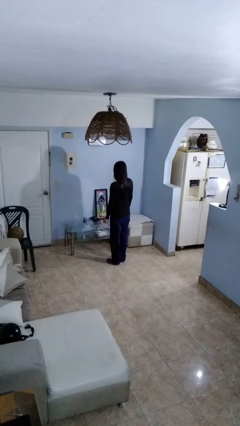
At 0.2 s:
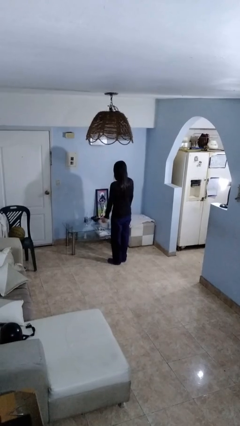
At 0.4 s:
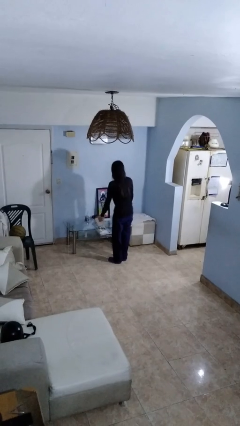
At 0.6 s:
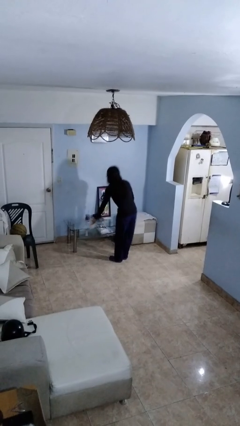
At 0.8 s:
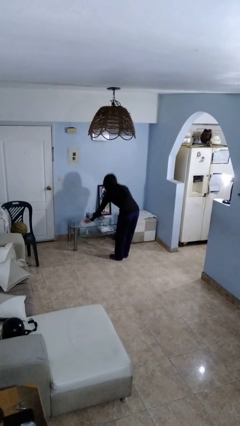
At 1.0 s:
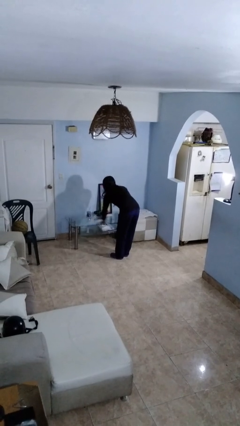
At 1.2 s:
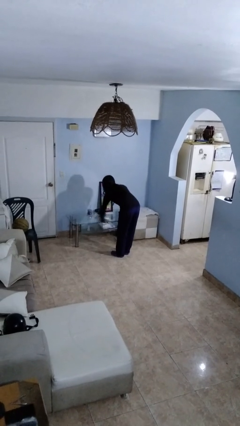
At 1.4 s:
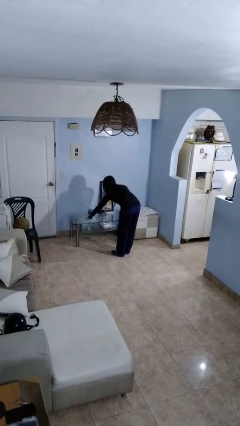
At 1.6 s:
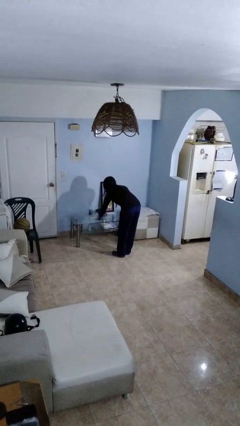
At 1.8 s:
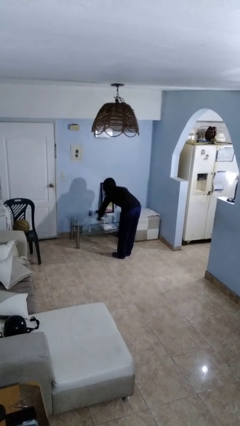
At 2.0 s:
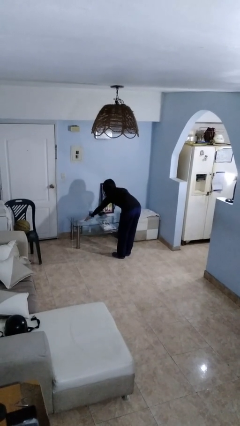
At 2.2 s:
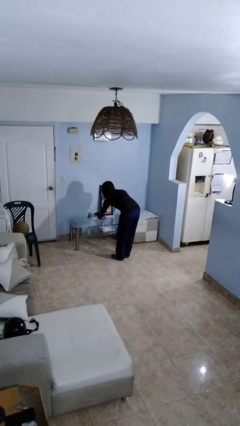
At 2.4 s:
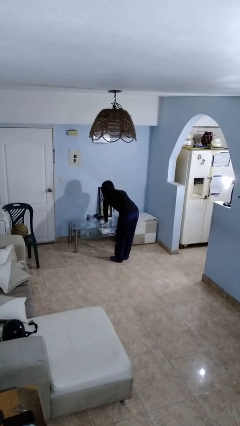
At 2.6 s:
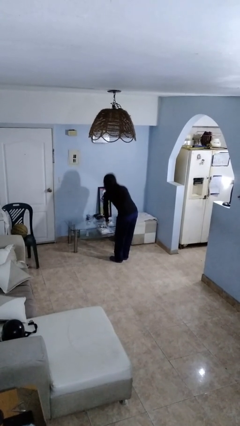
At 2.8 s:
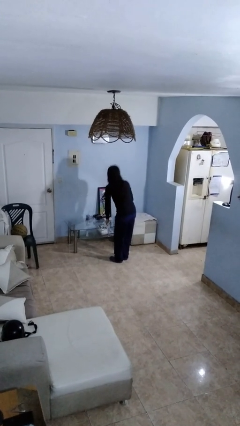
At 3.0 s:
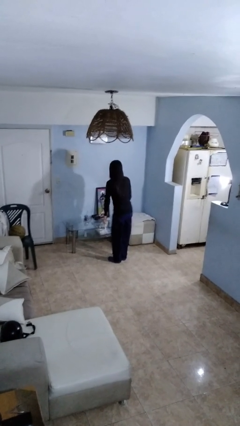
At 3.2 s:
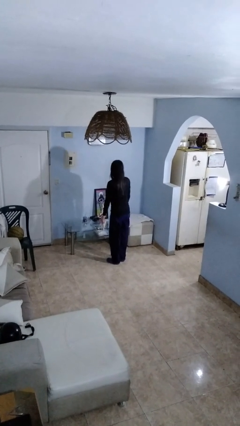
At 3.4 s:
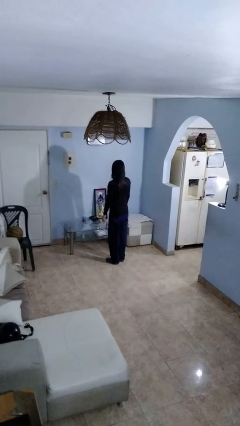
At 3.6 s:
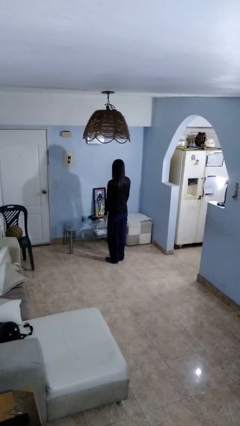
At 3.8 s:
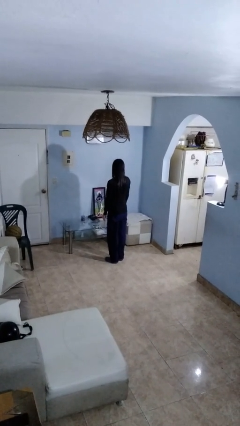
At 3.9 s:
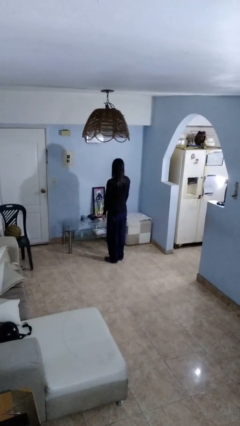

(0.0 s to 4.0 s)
person cleans table with rag

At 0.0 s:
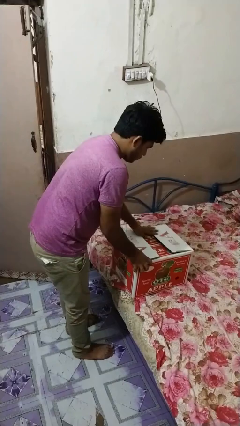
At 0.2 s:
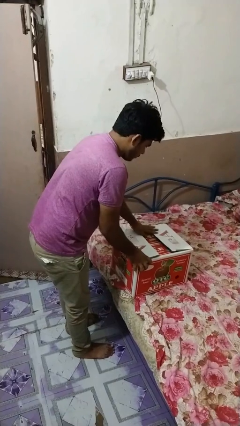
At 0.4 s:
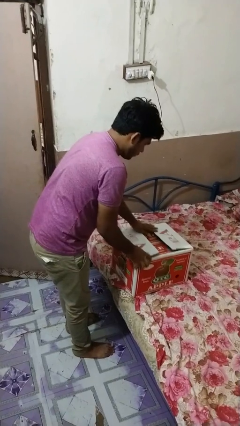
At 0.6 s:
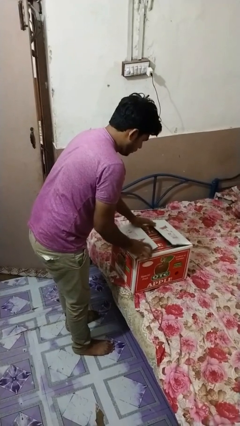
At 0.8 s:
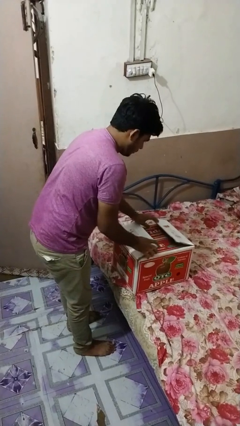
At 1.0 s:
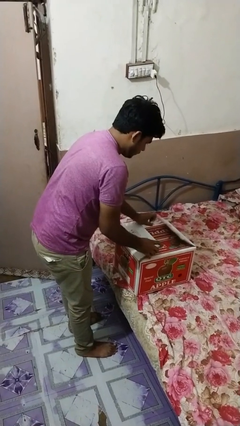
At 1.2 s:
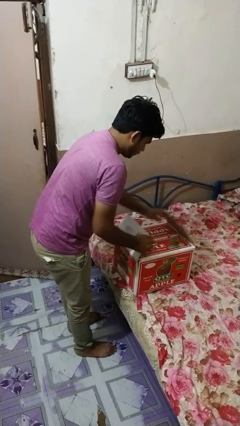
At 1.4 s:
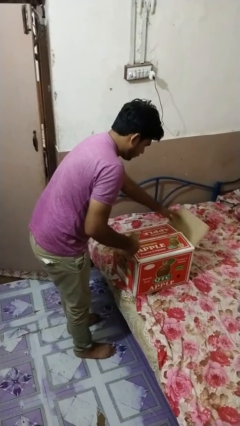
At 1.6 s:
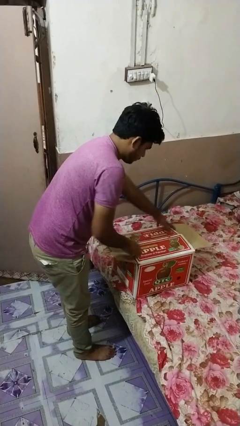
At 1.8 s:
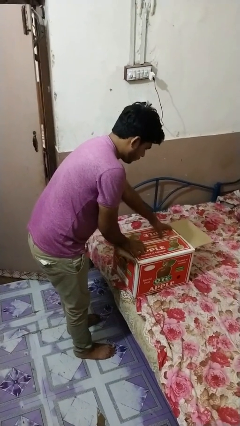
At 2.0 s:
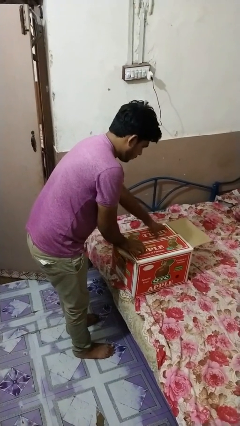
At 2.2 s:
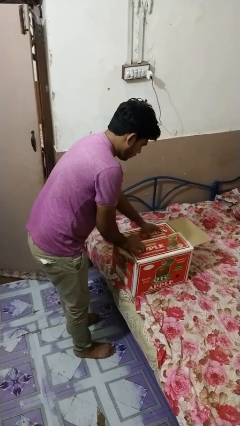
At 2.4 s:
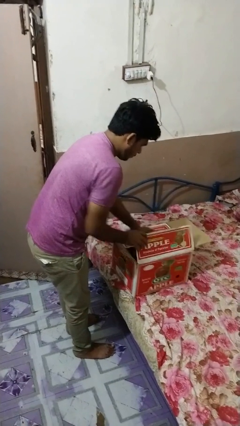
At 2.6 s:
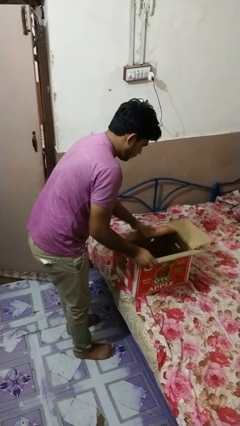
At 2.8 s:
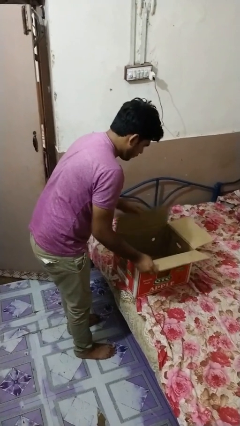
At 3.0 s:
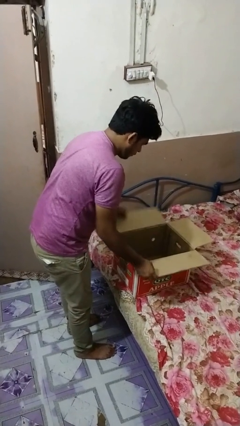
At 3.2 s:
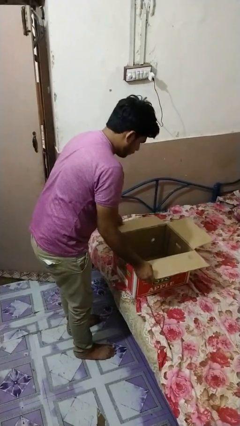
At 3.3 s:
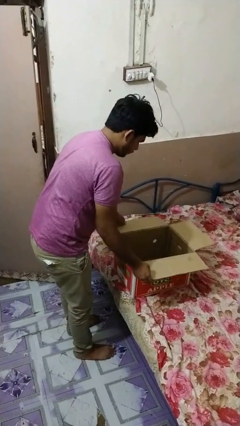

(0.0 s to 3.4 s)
person closes box

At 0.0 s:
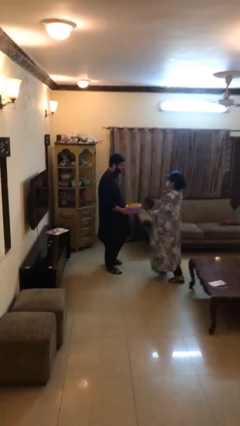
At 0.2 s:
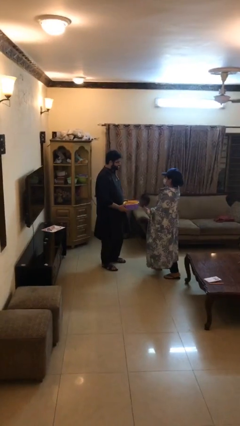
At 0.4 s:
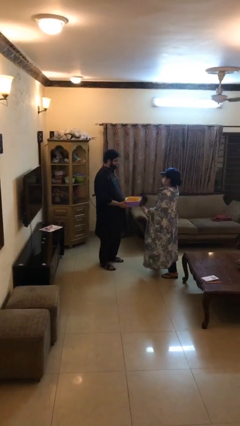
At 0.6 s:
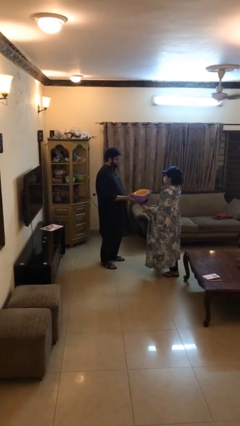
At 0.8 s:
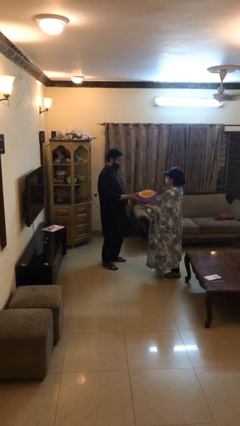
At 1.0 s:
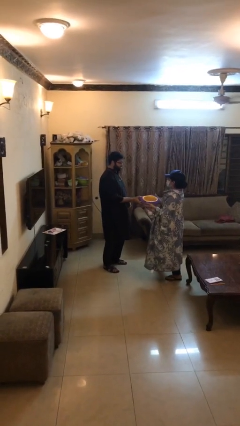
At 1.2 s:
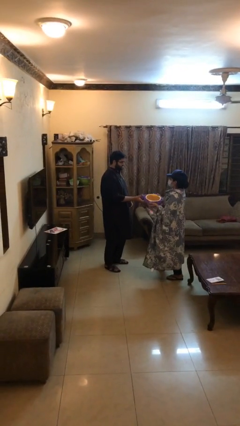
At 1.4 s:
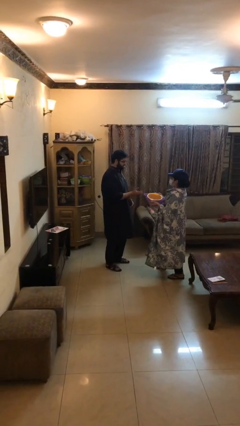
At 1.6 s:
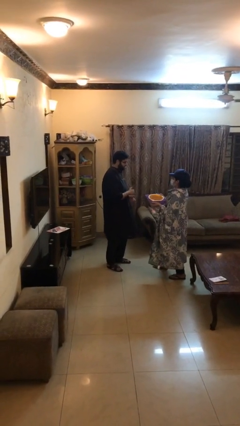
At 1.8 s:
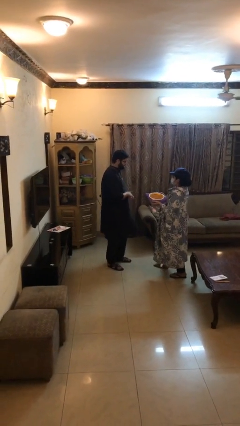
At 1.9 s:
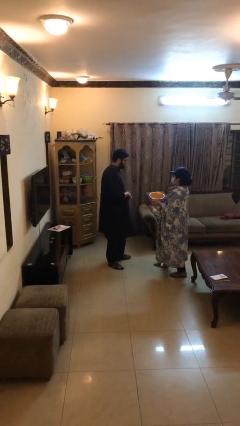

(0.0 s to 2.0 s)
person transfers object to person

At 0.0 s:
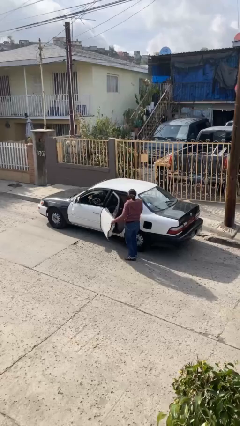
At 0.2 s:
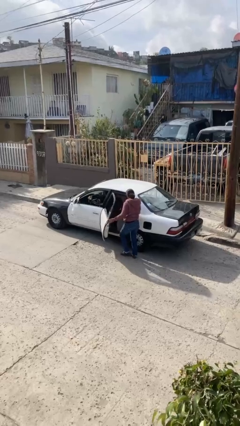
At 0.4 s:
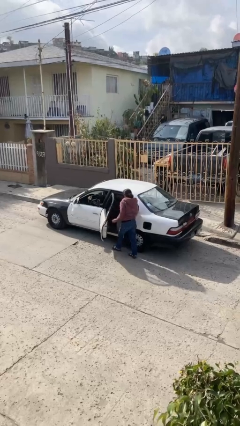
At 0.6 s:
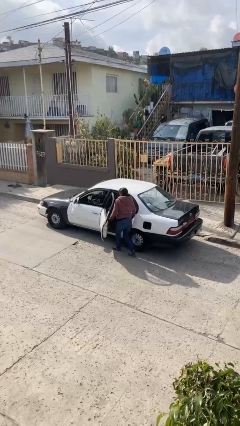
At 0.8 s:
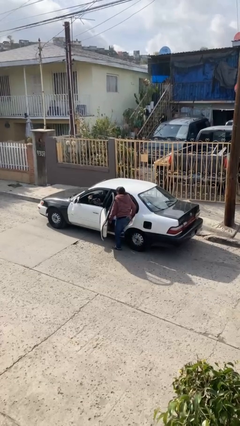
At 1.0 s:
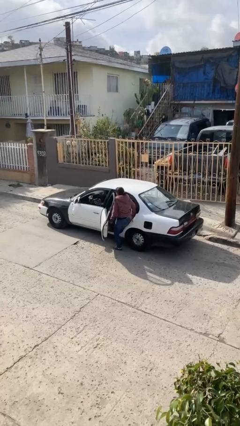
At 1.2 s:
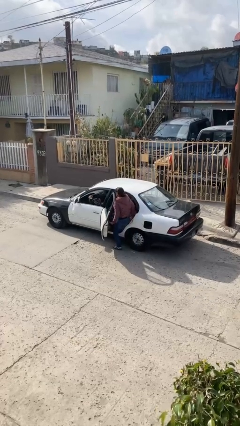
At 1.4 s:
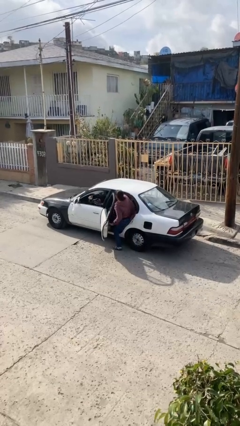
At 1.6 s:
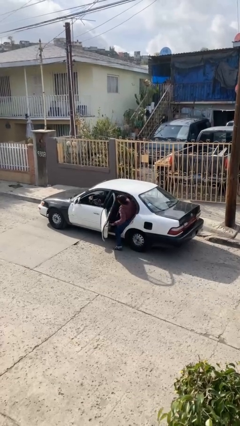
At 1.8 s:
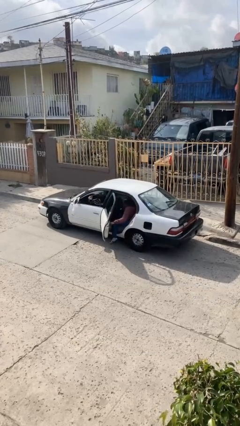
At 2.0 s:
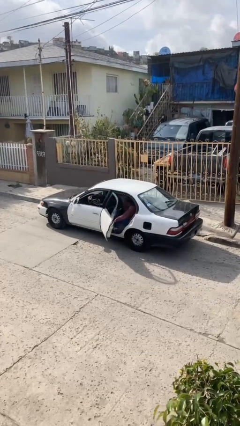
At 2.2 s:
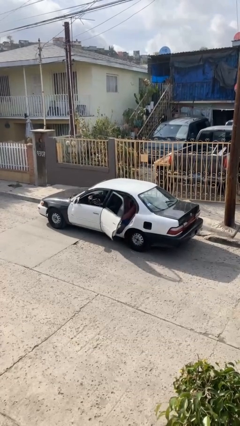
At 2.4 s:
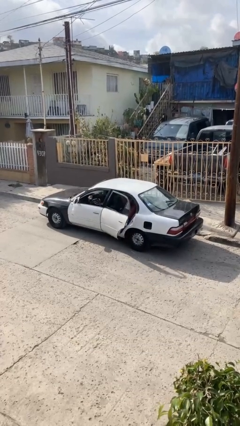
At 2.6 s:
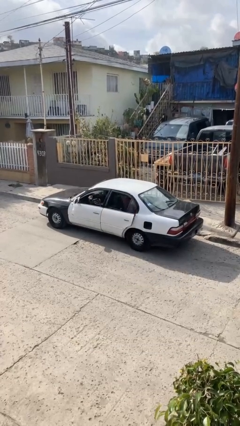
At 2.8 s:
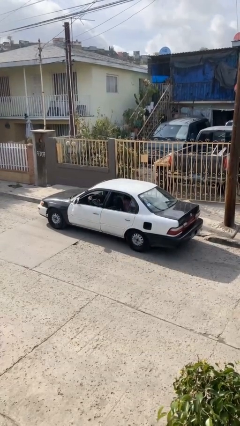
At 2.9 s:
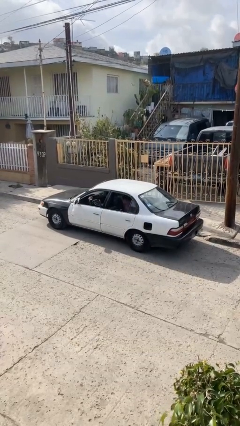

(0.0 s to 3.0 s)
car picks up person

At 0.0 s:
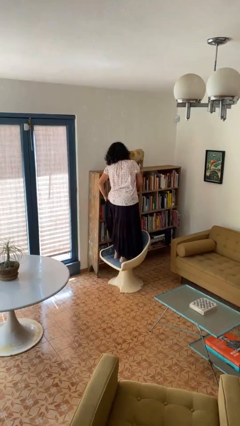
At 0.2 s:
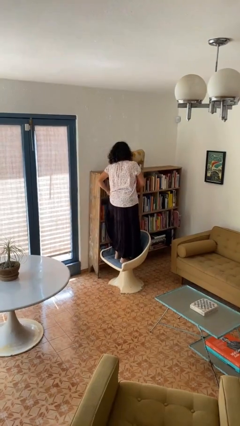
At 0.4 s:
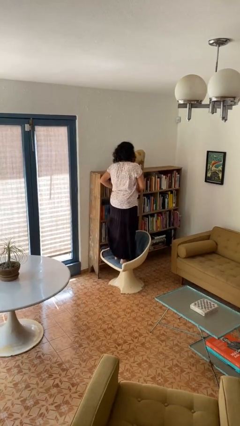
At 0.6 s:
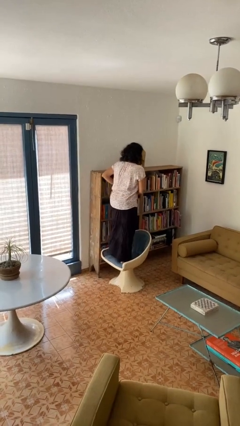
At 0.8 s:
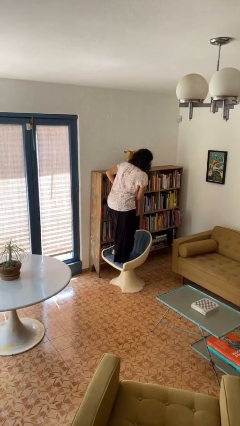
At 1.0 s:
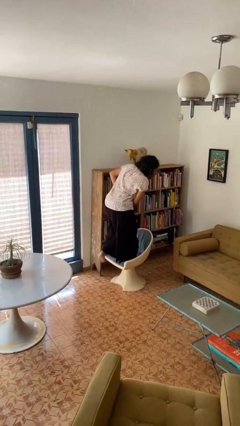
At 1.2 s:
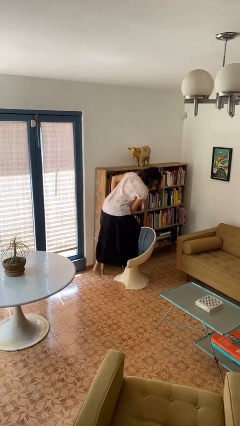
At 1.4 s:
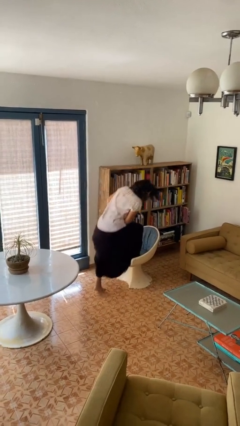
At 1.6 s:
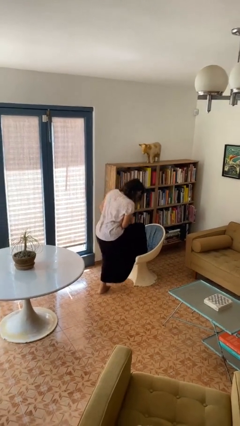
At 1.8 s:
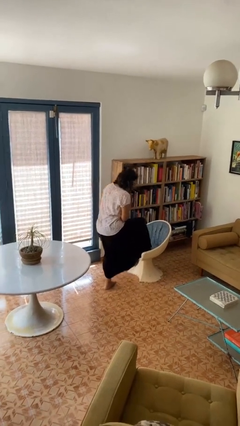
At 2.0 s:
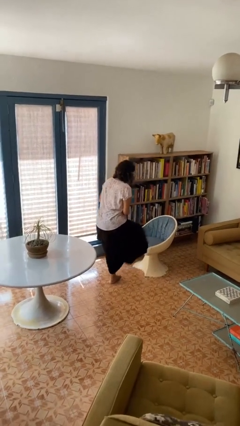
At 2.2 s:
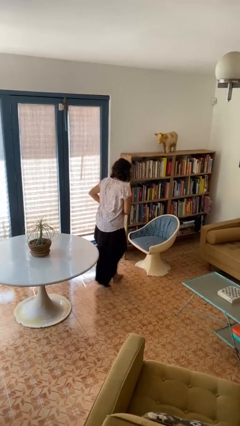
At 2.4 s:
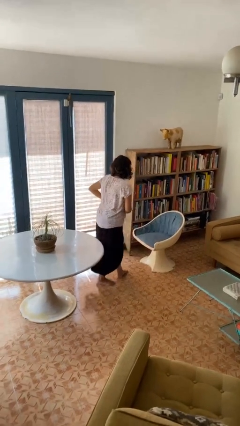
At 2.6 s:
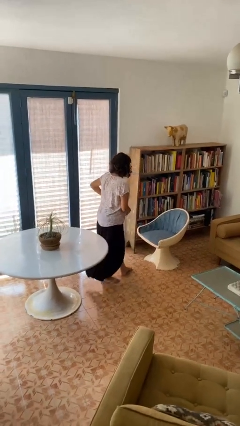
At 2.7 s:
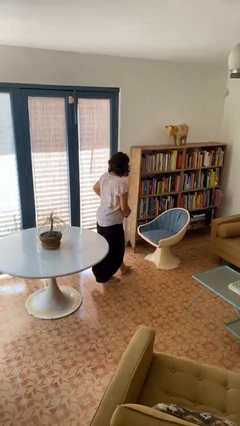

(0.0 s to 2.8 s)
person climbs off chair

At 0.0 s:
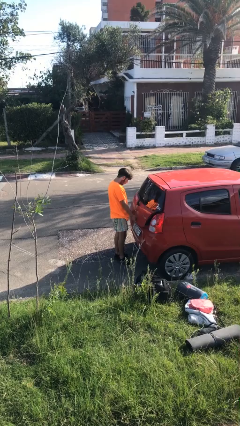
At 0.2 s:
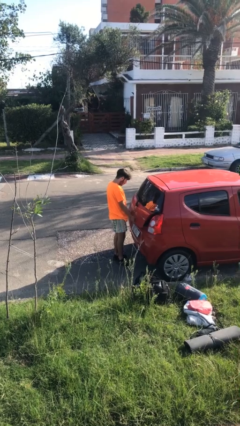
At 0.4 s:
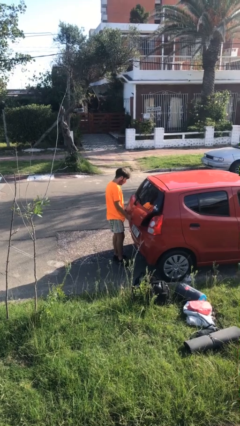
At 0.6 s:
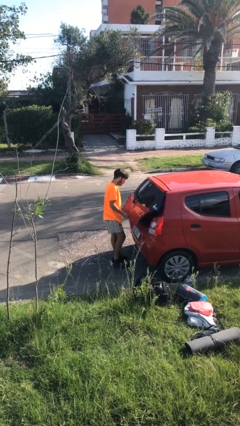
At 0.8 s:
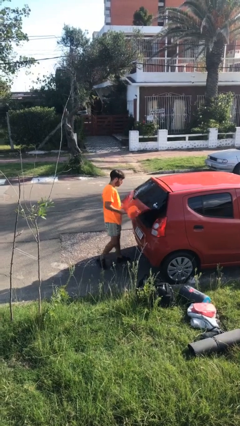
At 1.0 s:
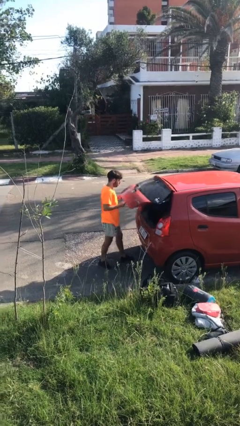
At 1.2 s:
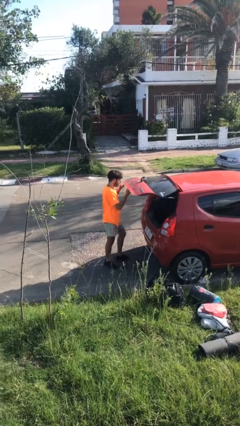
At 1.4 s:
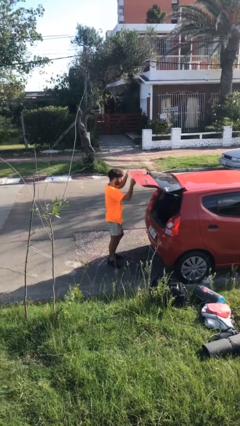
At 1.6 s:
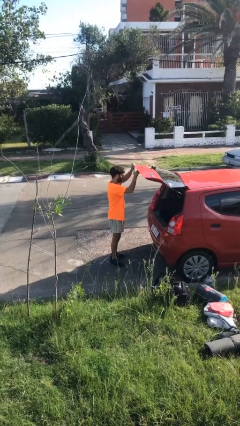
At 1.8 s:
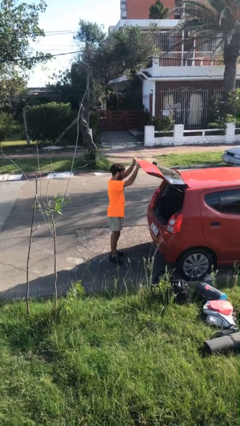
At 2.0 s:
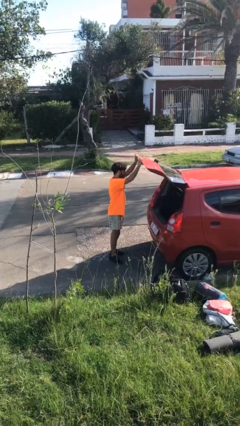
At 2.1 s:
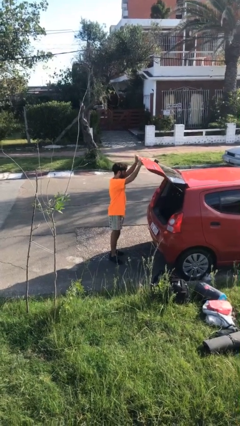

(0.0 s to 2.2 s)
person opens car trunk

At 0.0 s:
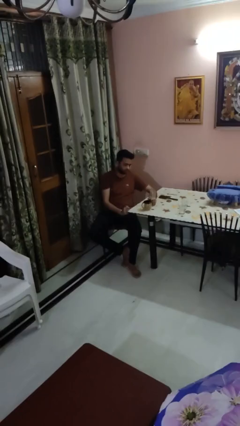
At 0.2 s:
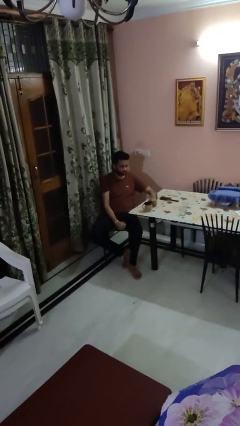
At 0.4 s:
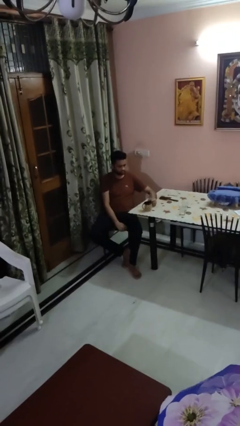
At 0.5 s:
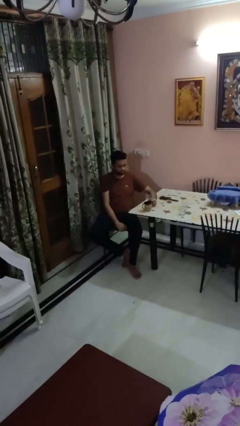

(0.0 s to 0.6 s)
person unscrews lid from bottle
